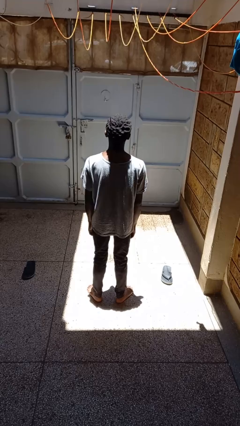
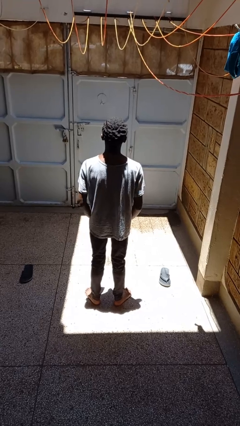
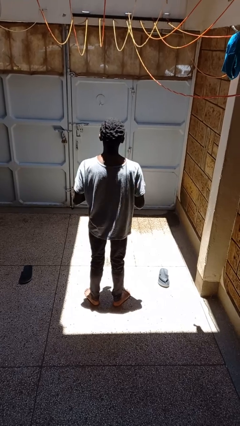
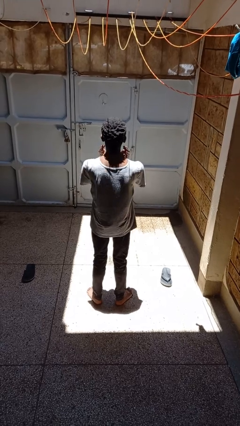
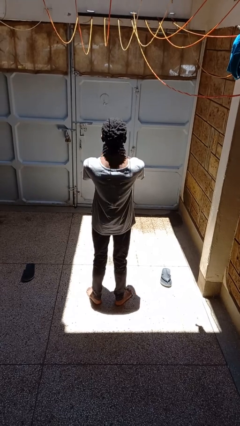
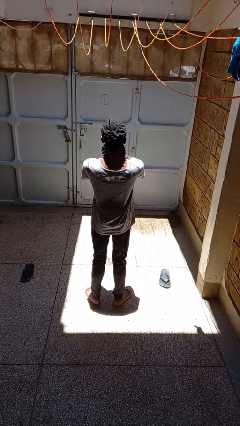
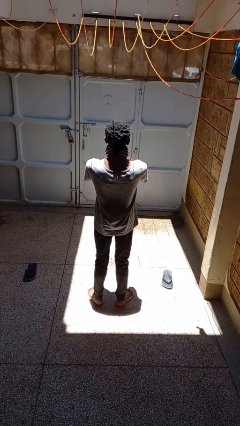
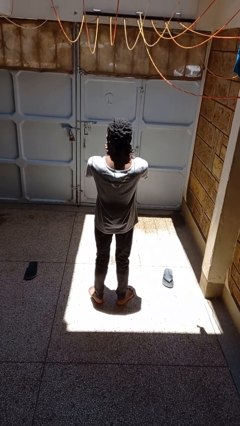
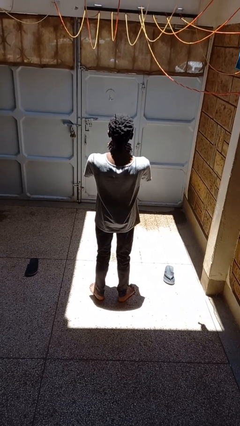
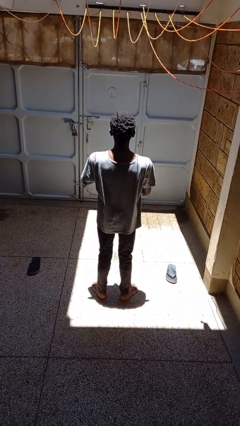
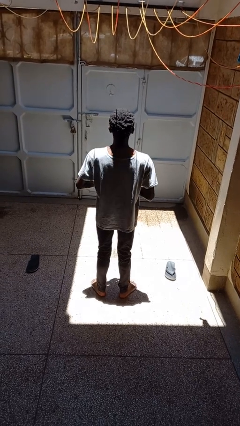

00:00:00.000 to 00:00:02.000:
person rubs neck

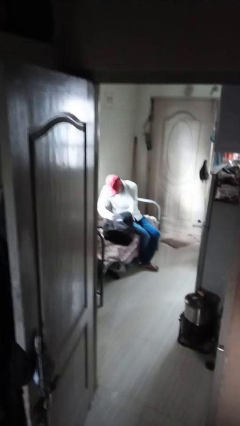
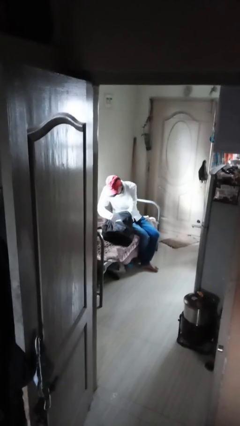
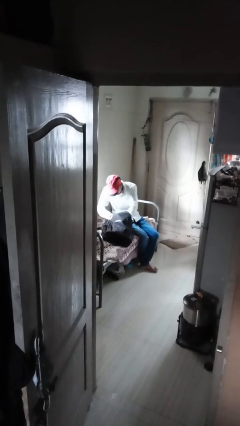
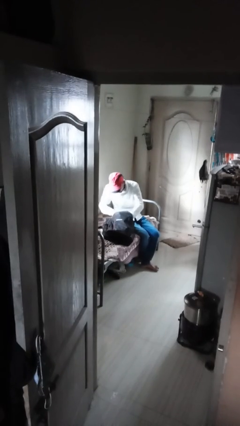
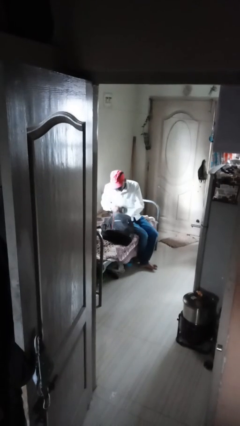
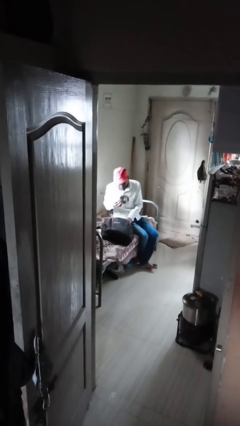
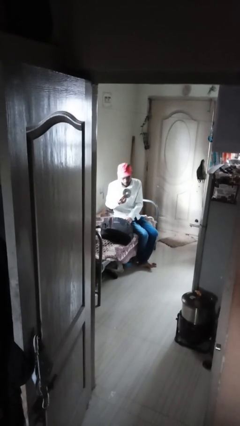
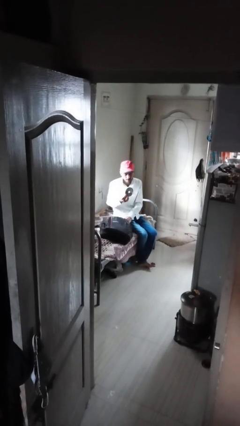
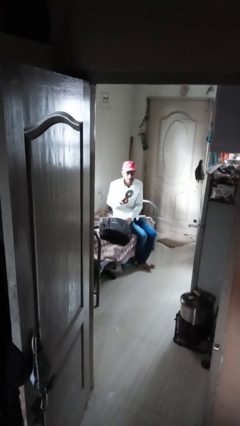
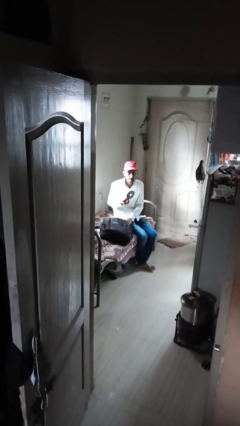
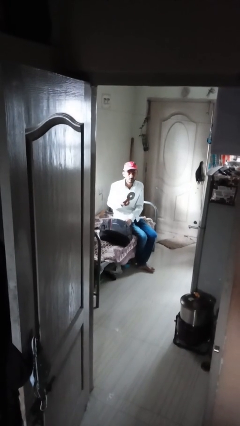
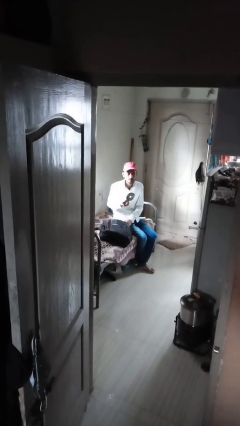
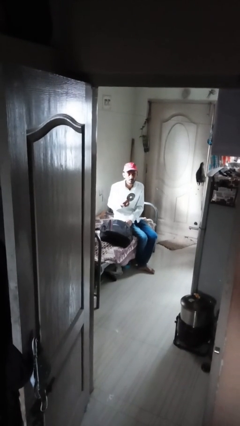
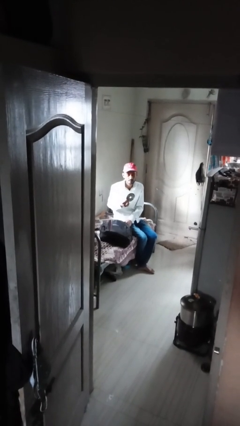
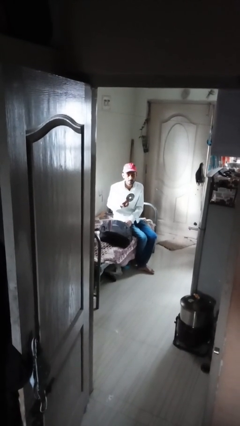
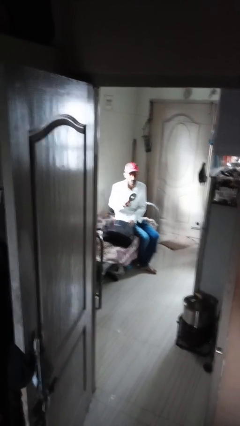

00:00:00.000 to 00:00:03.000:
person takes object from backpack

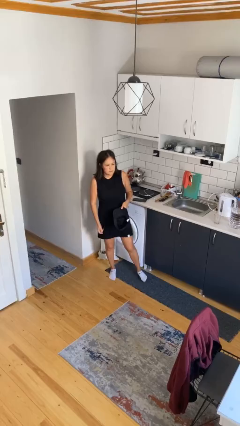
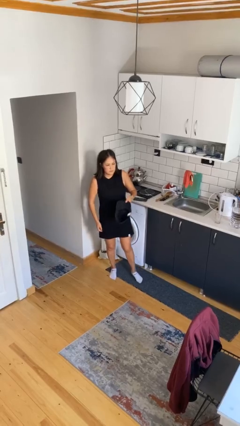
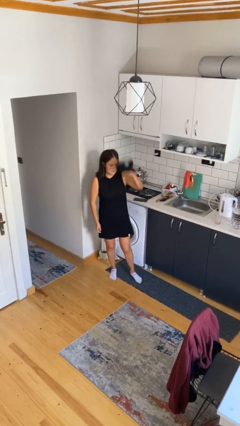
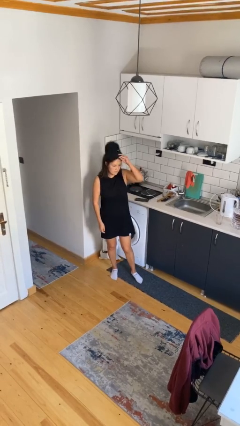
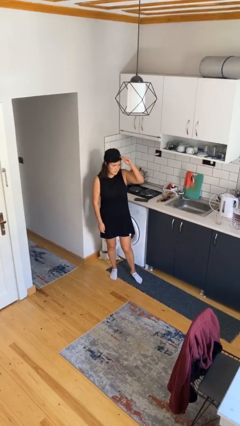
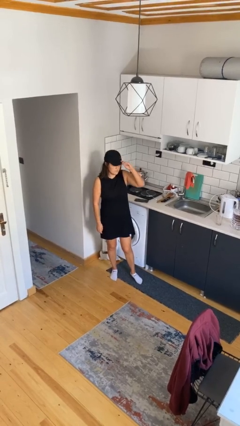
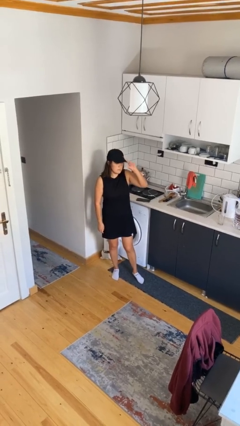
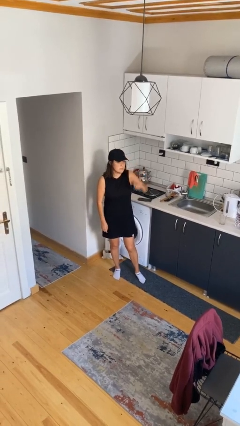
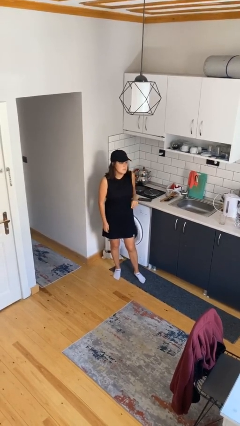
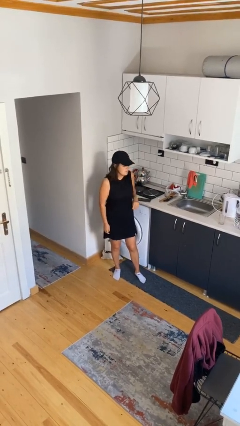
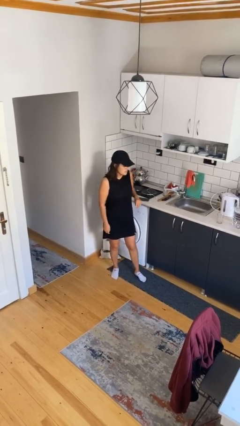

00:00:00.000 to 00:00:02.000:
person puts on hat

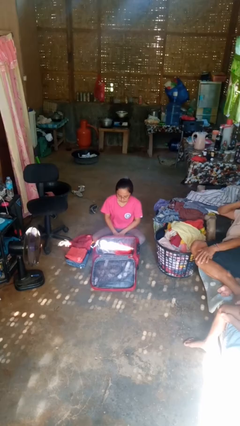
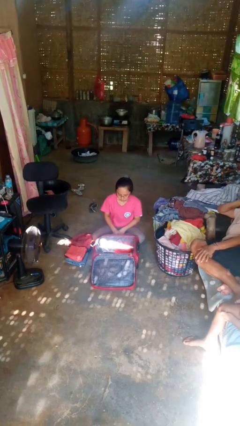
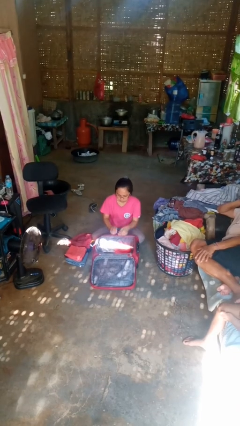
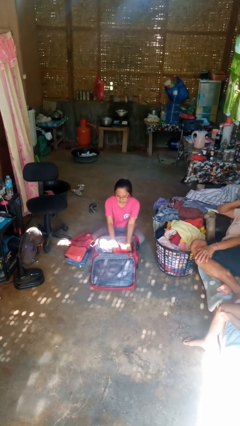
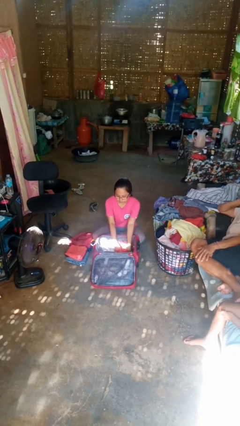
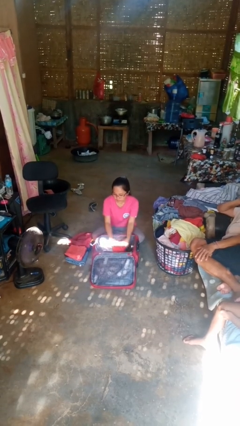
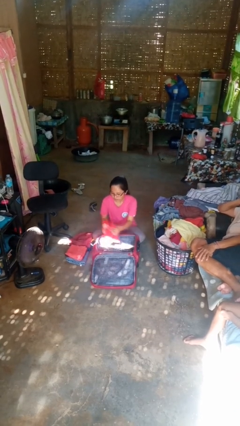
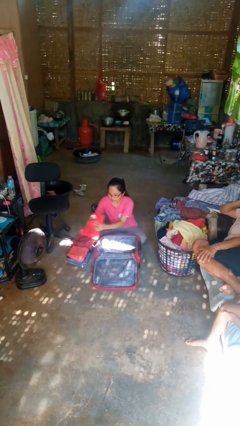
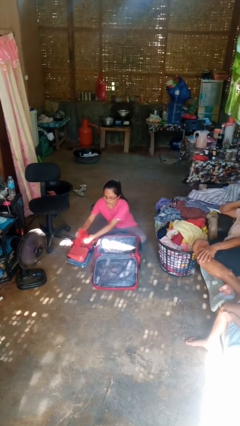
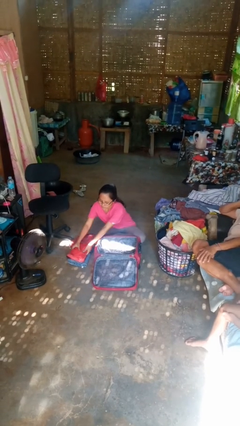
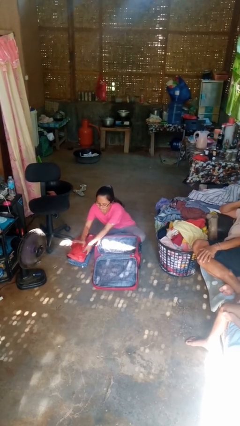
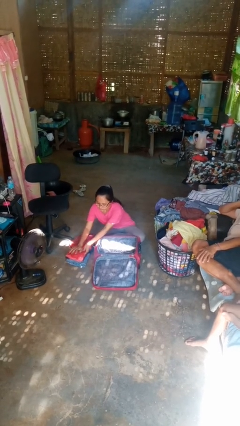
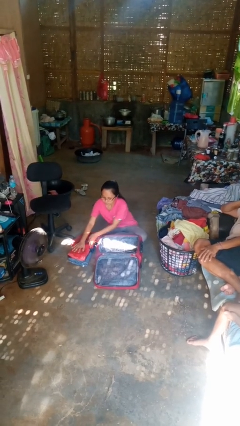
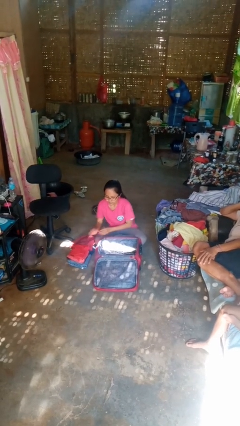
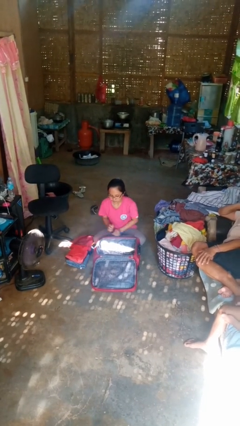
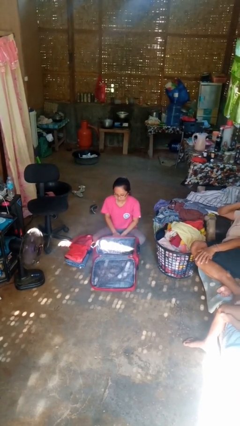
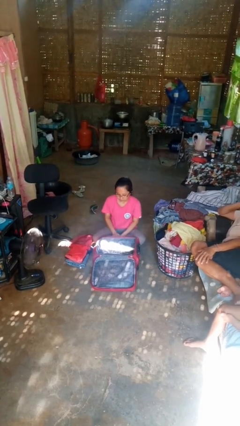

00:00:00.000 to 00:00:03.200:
person unloads clothes from suitcase

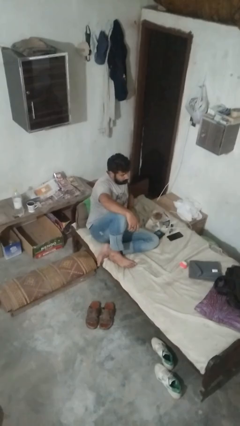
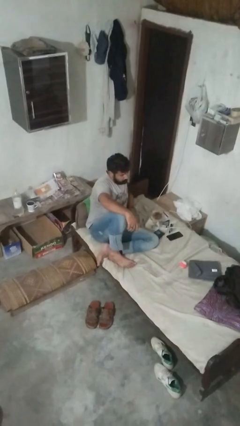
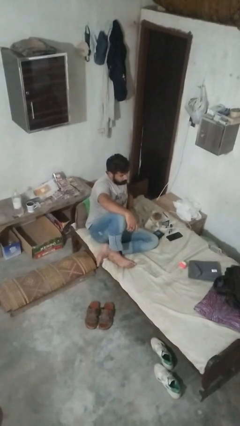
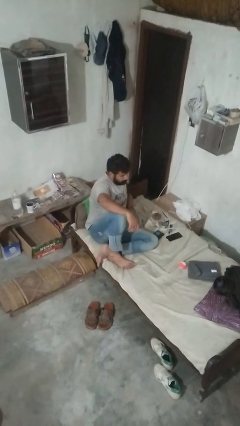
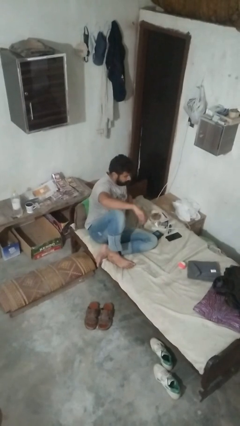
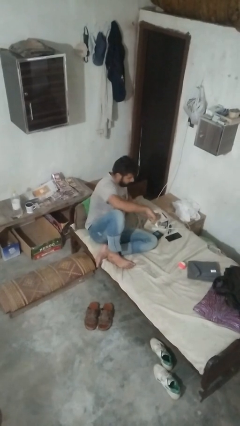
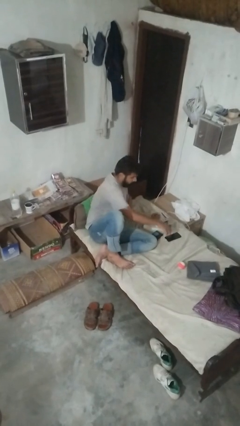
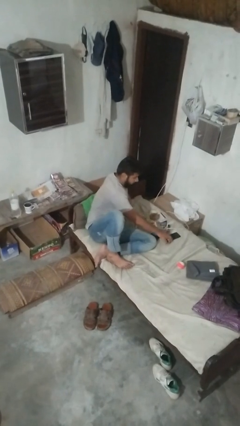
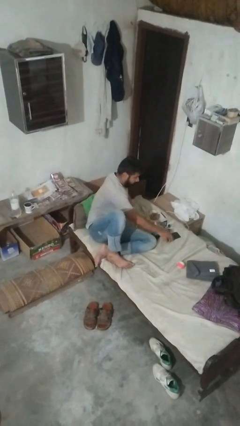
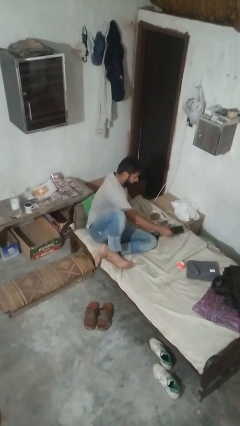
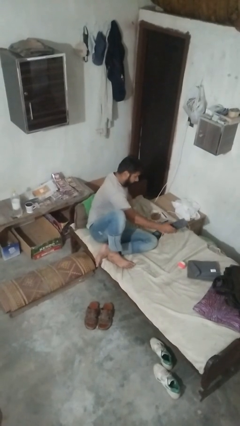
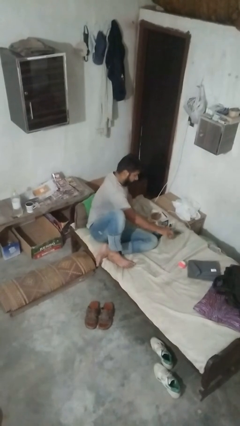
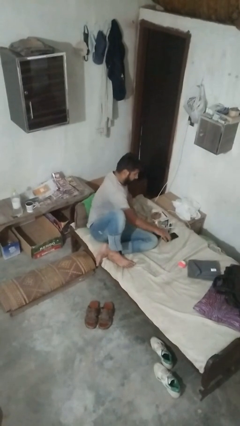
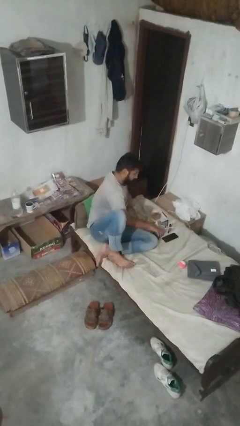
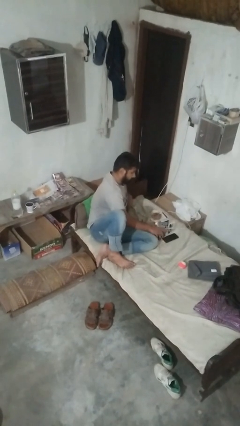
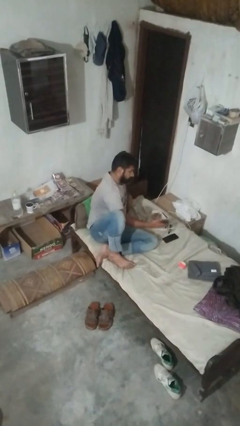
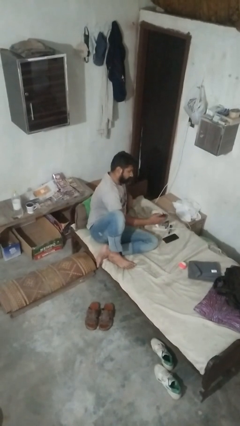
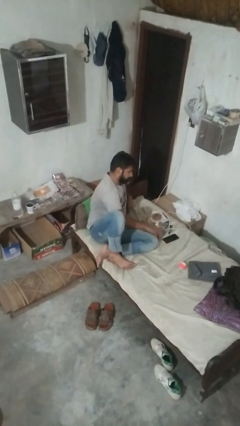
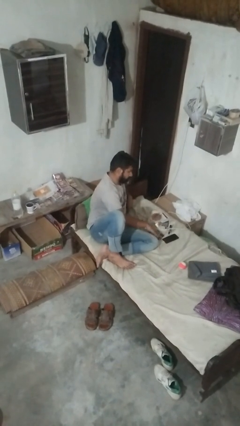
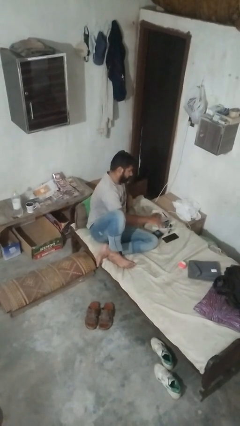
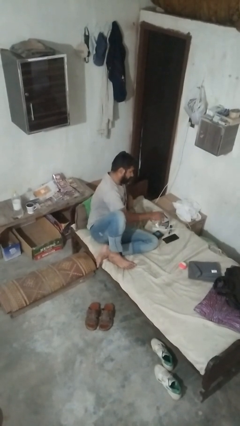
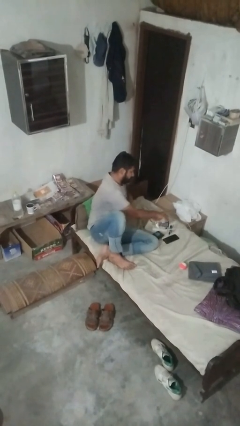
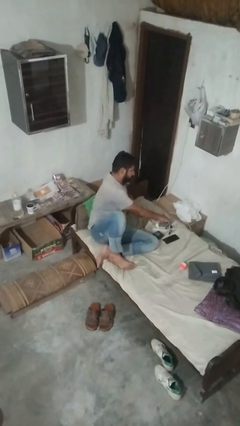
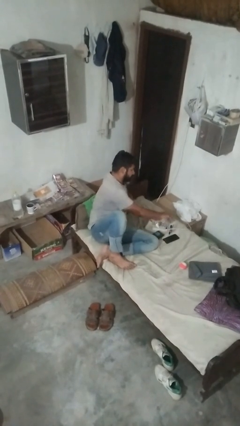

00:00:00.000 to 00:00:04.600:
person searches under bed

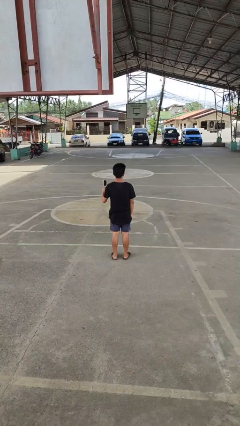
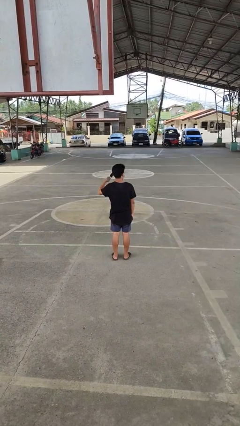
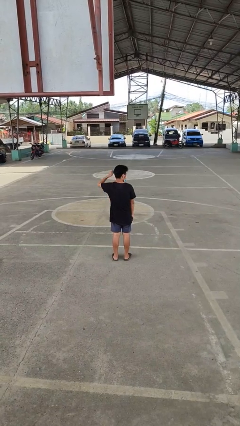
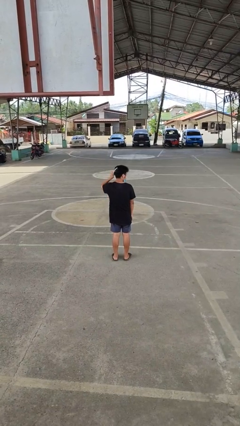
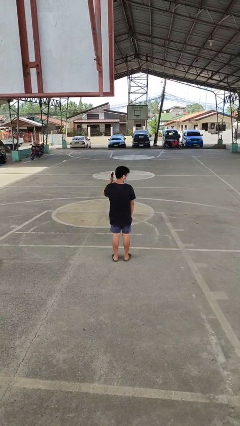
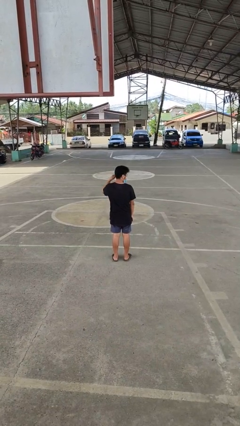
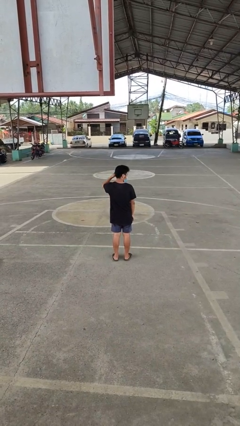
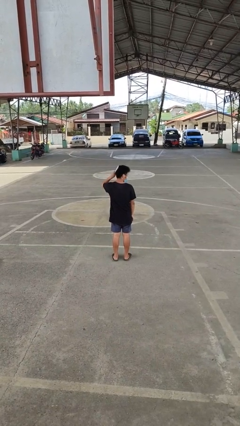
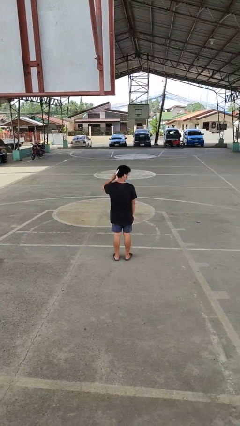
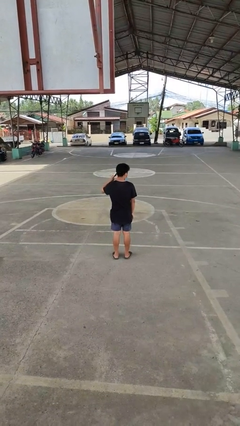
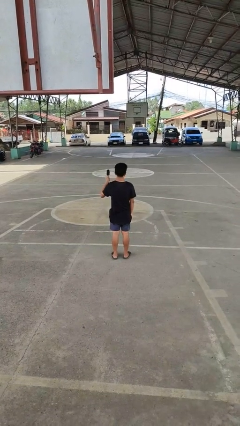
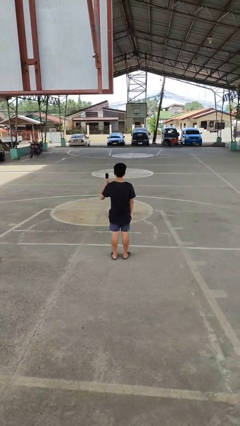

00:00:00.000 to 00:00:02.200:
person brushes hair

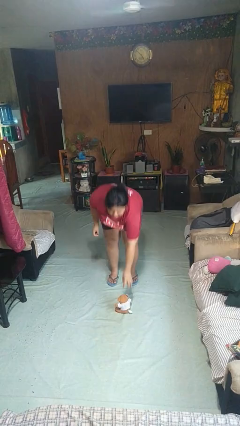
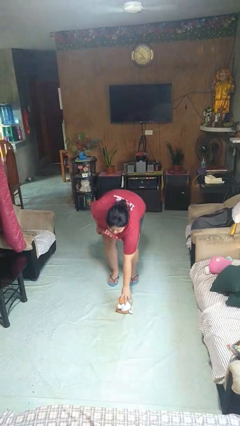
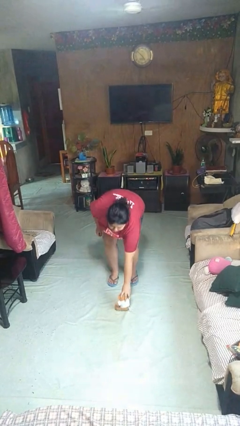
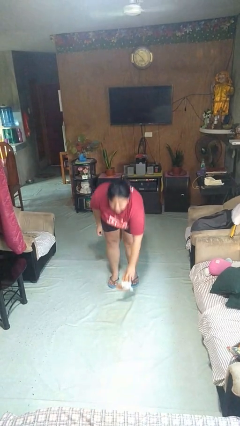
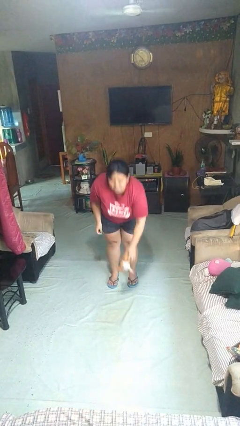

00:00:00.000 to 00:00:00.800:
person picks up object from floor
